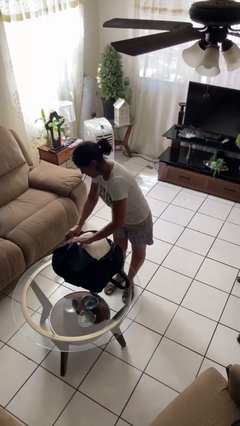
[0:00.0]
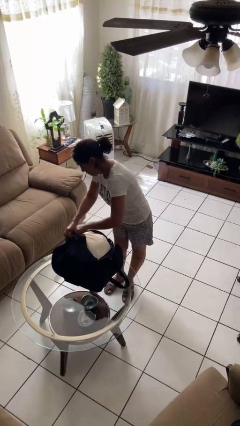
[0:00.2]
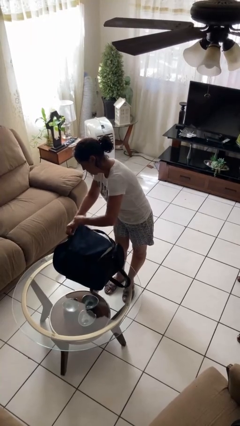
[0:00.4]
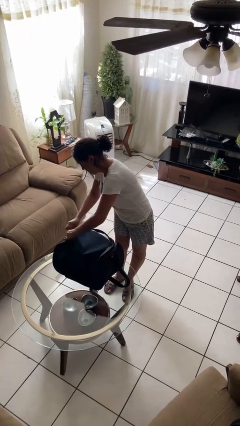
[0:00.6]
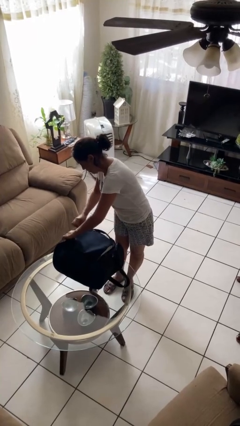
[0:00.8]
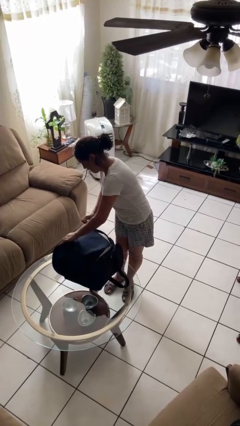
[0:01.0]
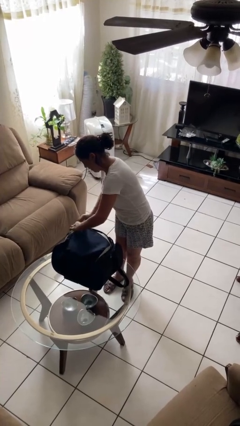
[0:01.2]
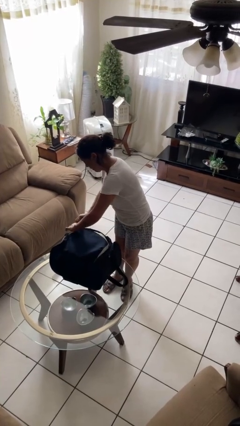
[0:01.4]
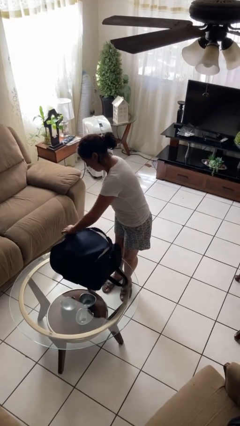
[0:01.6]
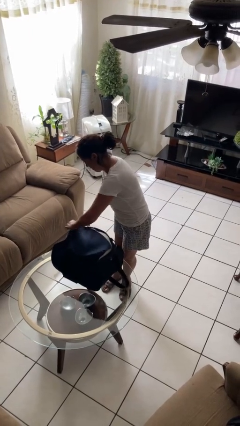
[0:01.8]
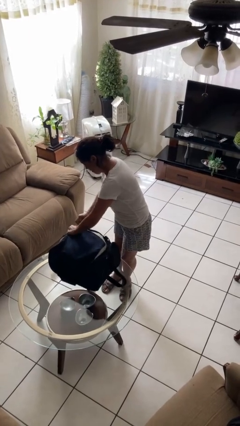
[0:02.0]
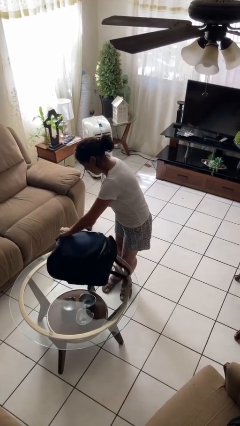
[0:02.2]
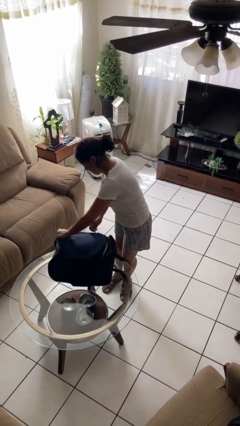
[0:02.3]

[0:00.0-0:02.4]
person closes suitcase

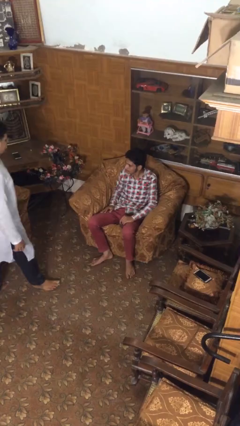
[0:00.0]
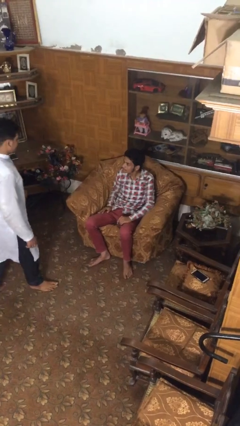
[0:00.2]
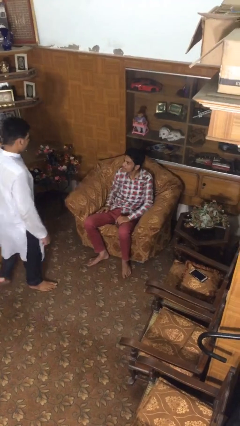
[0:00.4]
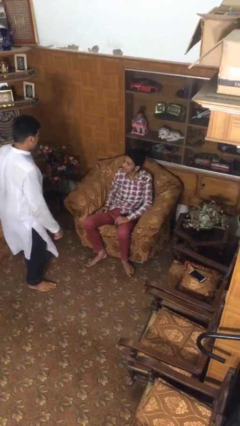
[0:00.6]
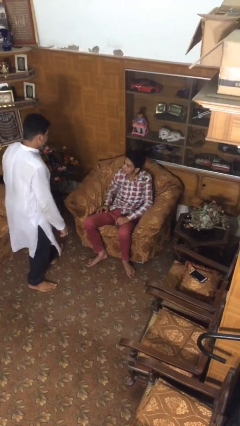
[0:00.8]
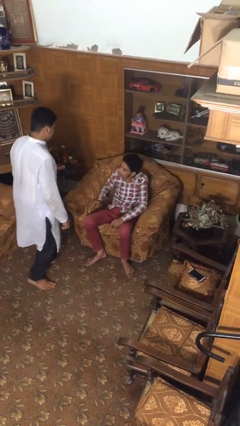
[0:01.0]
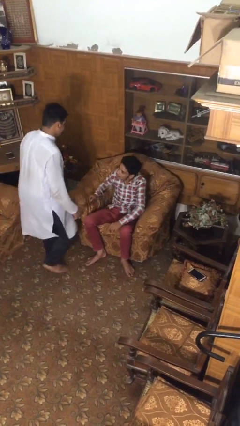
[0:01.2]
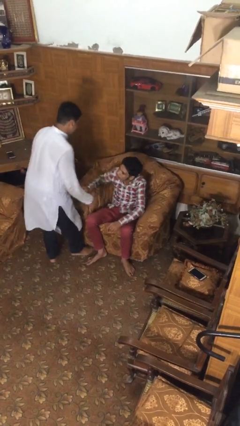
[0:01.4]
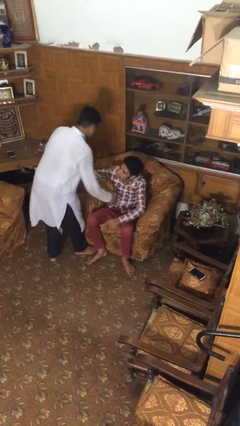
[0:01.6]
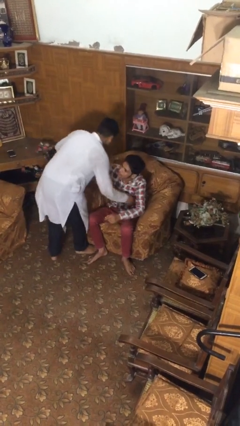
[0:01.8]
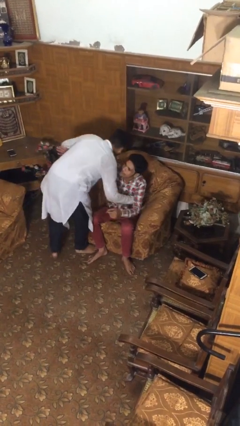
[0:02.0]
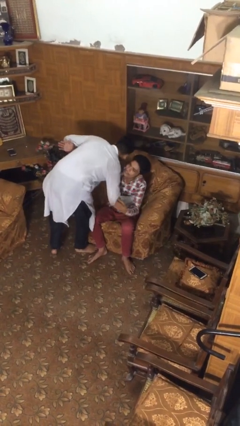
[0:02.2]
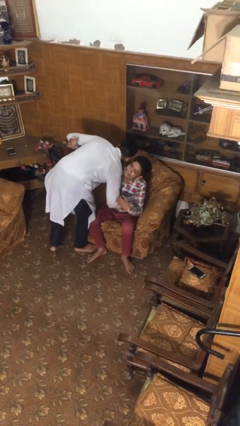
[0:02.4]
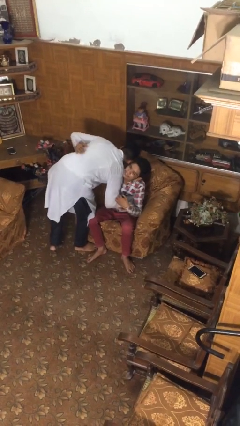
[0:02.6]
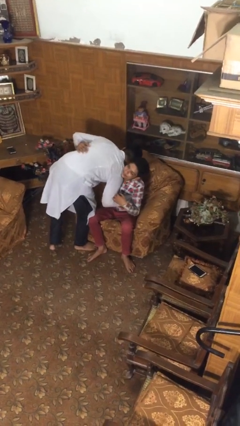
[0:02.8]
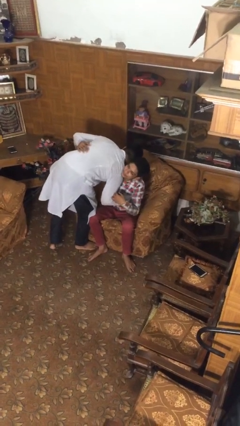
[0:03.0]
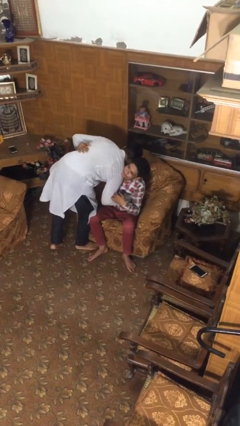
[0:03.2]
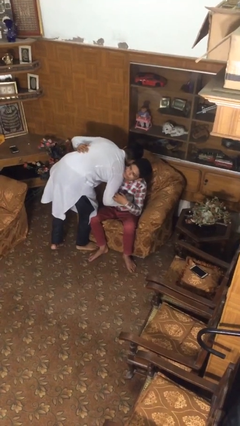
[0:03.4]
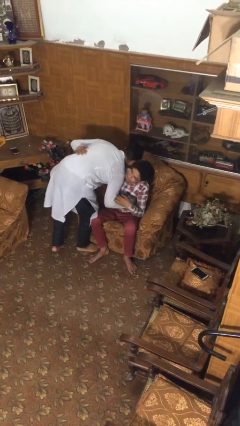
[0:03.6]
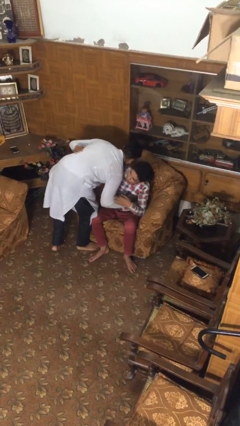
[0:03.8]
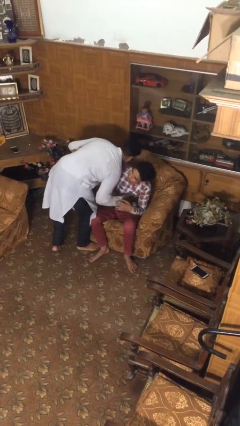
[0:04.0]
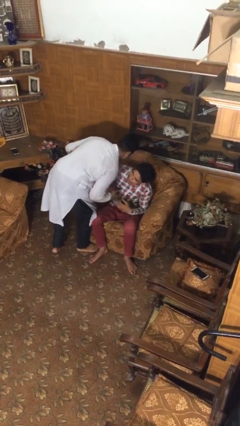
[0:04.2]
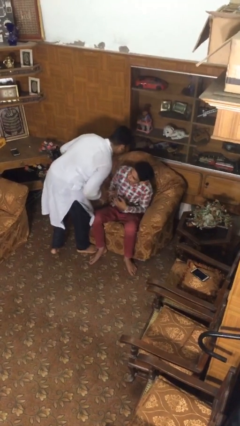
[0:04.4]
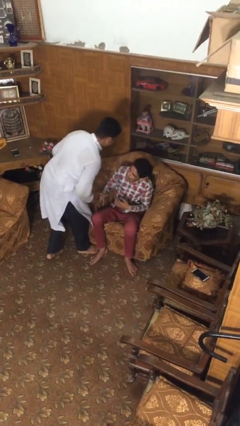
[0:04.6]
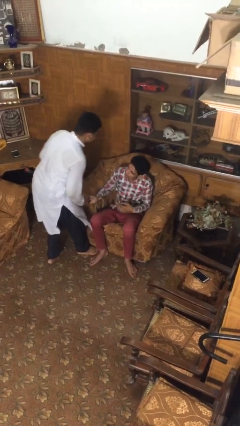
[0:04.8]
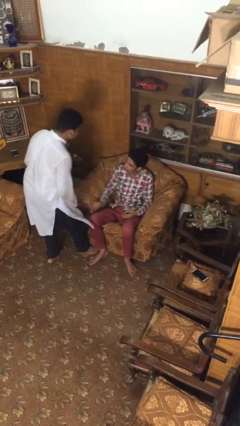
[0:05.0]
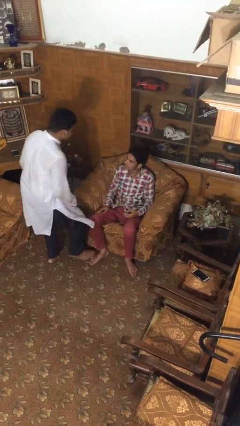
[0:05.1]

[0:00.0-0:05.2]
person embraces person

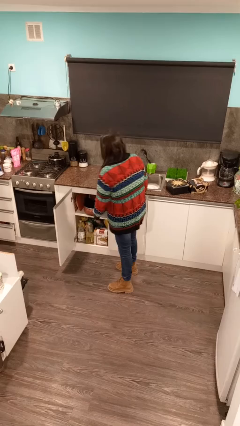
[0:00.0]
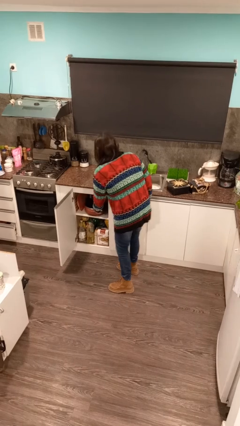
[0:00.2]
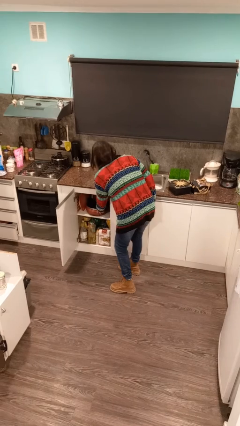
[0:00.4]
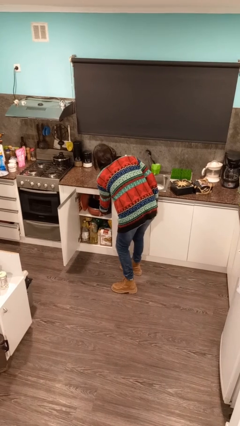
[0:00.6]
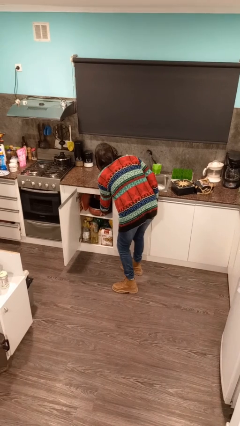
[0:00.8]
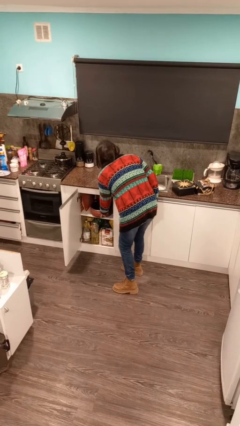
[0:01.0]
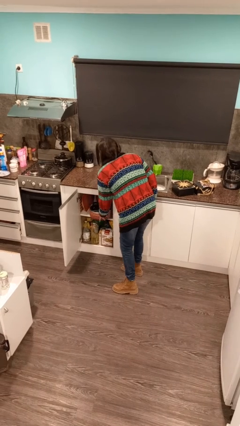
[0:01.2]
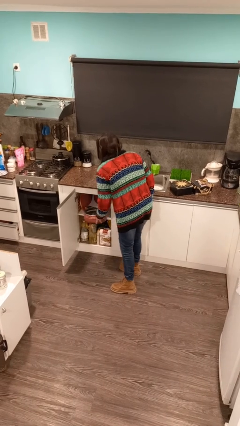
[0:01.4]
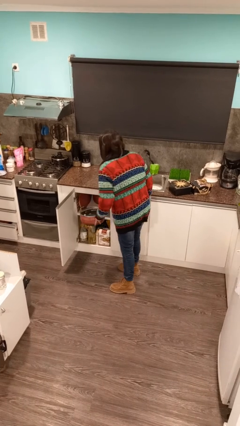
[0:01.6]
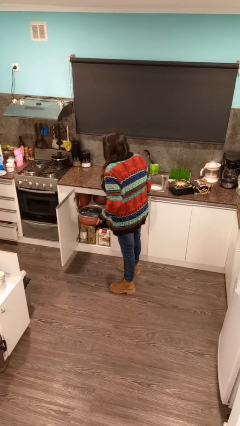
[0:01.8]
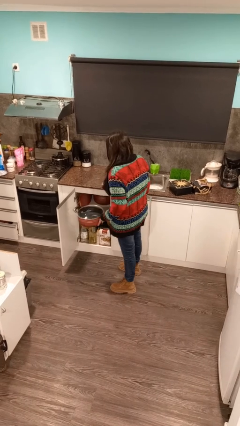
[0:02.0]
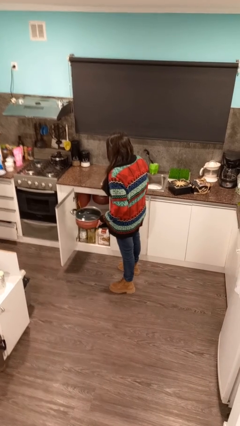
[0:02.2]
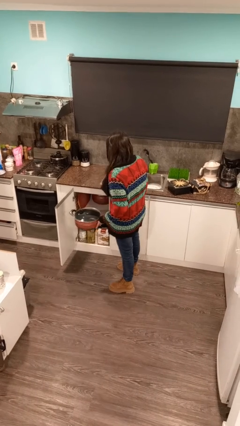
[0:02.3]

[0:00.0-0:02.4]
person picks up object from cabinet

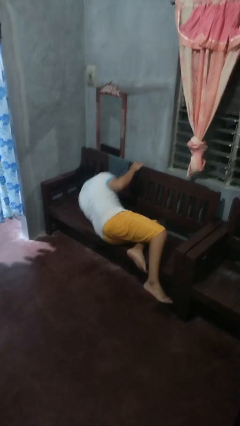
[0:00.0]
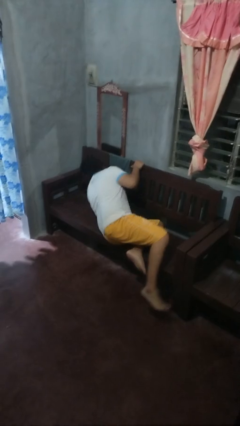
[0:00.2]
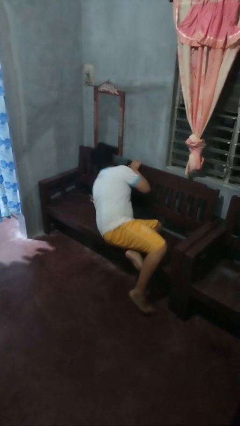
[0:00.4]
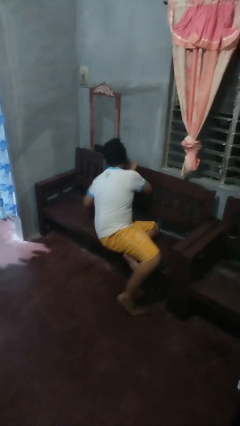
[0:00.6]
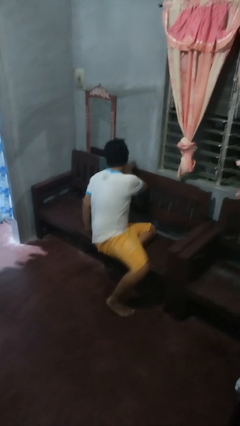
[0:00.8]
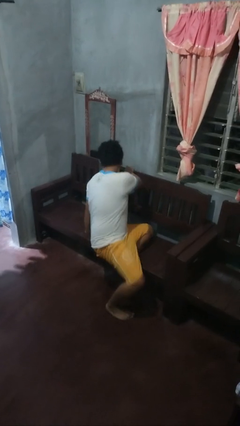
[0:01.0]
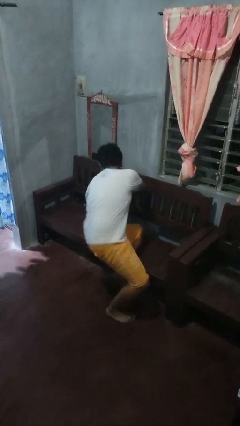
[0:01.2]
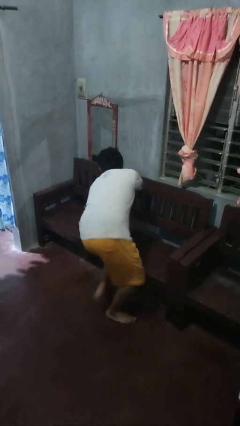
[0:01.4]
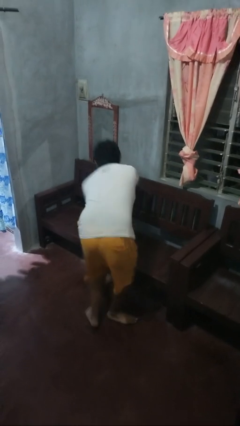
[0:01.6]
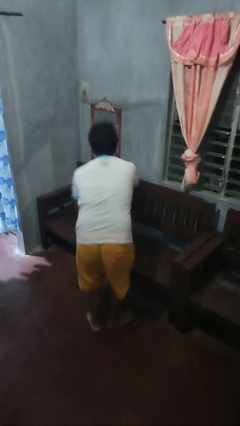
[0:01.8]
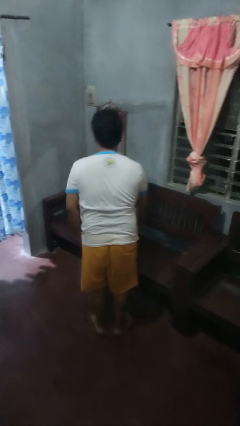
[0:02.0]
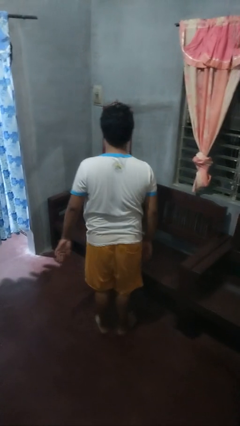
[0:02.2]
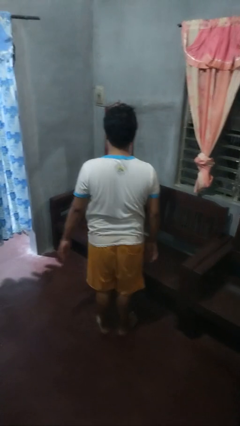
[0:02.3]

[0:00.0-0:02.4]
person stands up

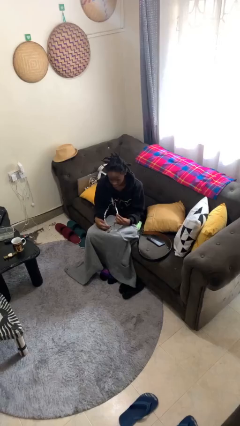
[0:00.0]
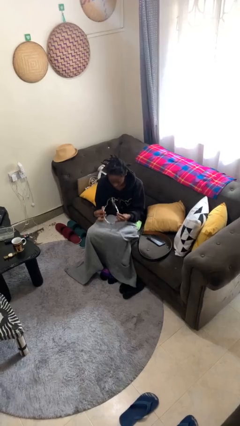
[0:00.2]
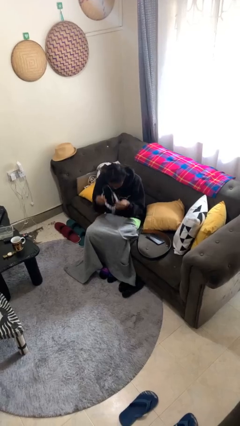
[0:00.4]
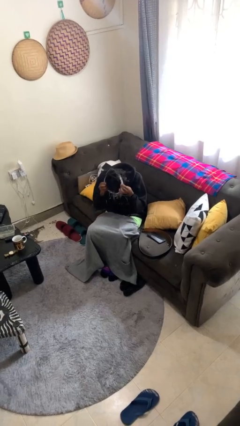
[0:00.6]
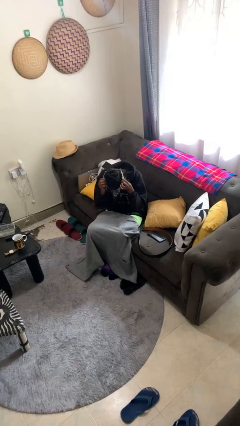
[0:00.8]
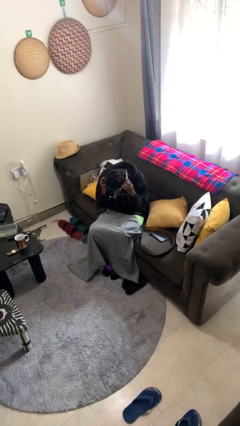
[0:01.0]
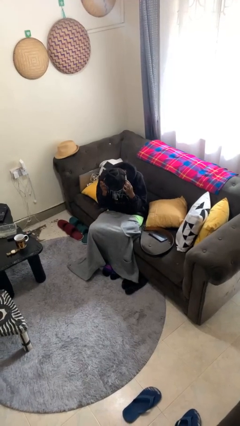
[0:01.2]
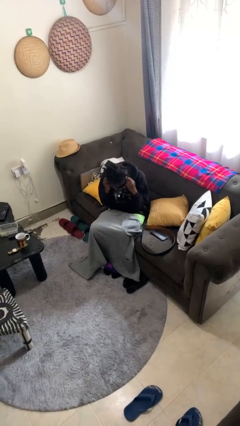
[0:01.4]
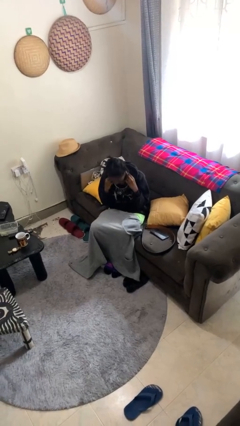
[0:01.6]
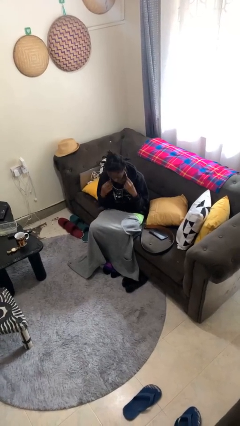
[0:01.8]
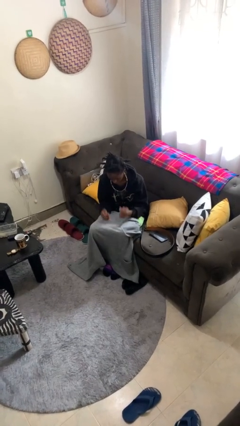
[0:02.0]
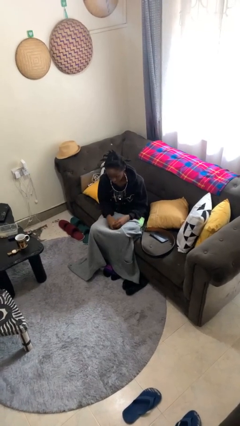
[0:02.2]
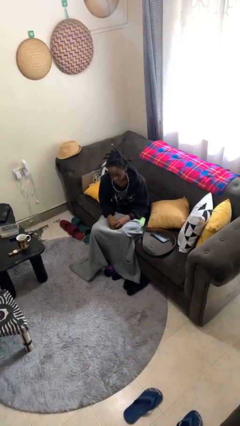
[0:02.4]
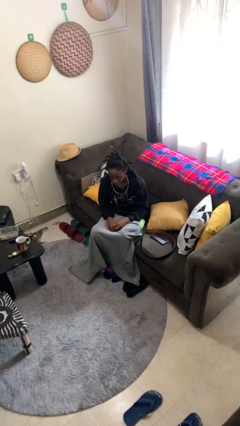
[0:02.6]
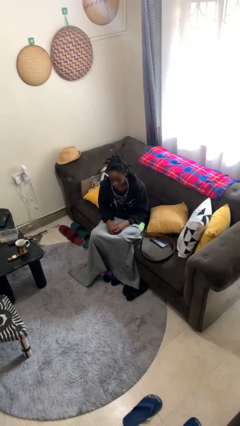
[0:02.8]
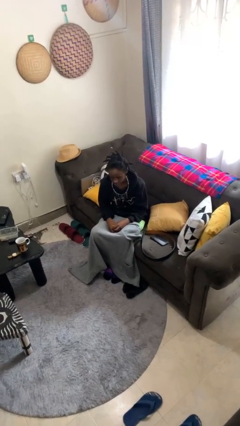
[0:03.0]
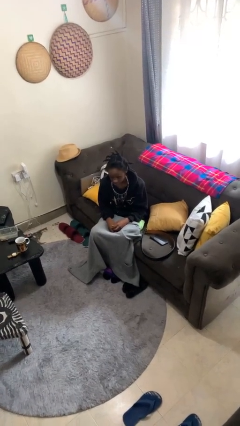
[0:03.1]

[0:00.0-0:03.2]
person puts on necklace

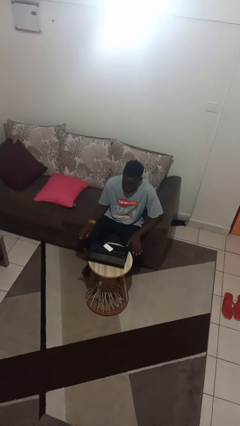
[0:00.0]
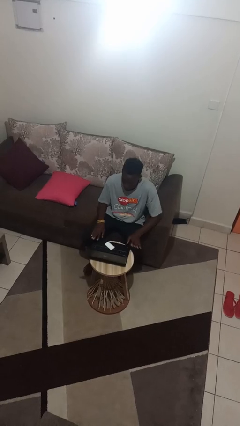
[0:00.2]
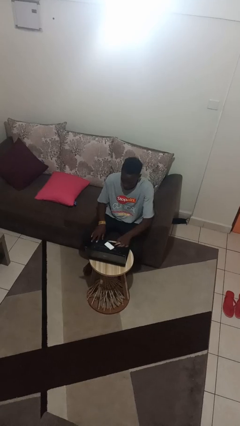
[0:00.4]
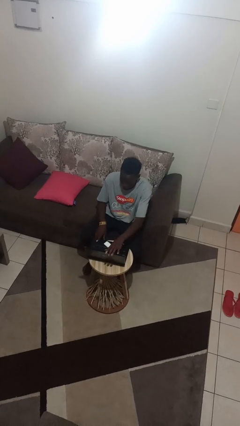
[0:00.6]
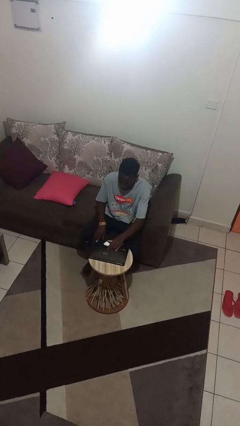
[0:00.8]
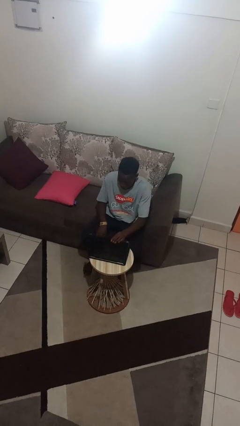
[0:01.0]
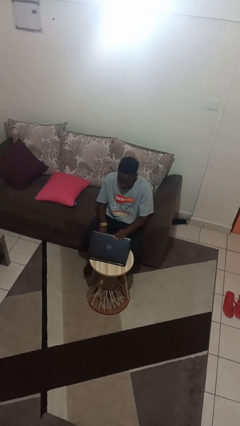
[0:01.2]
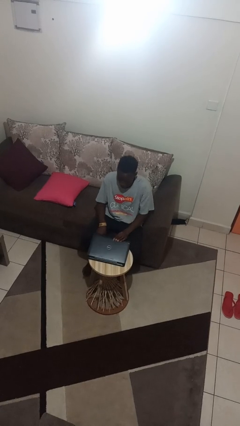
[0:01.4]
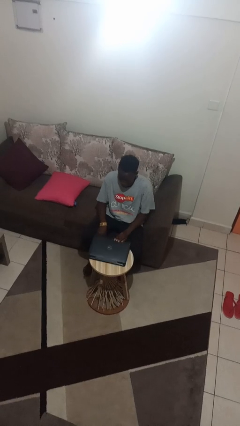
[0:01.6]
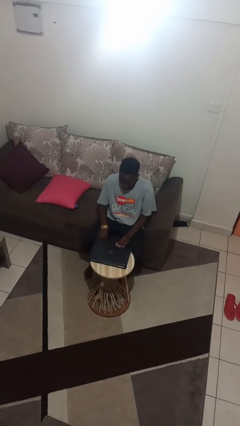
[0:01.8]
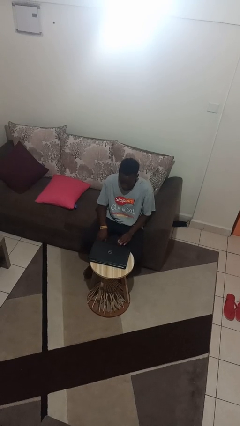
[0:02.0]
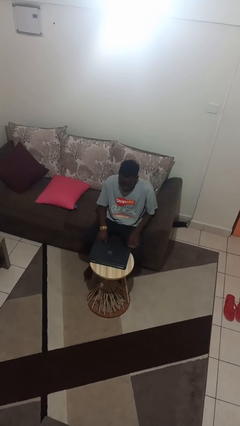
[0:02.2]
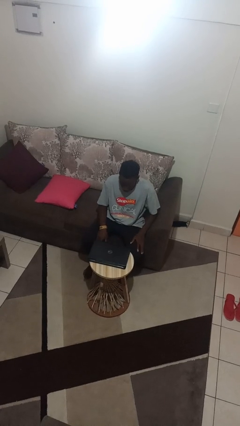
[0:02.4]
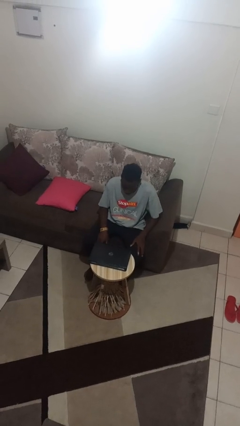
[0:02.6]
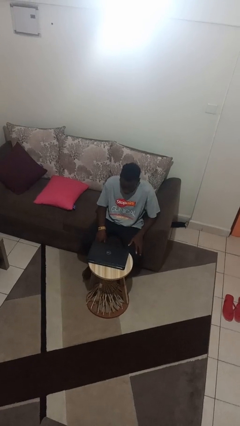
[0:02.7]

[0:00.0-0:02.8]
person closes laptop
